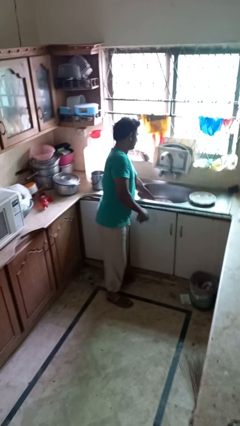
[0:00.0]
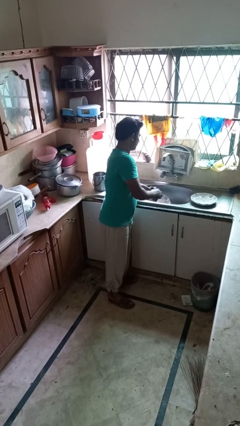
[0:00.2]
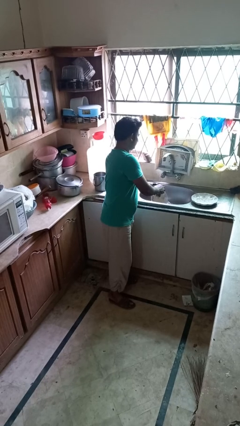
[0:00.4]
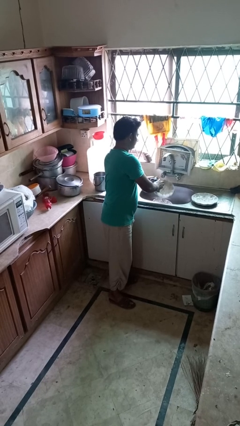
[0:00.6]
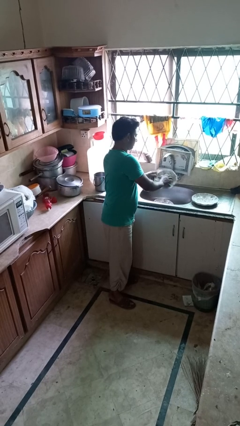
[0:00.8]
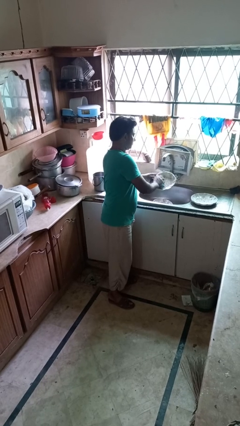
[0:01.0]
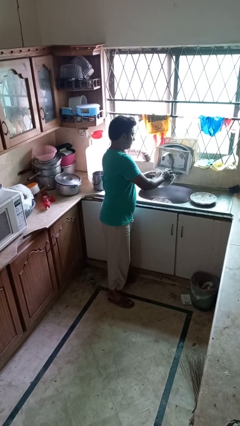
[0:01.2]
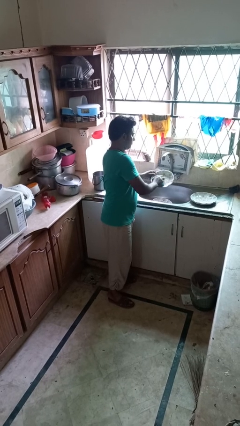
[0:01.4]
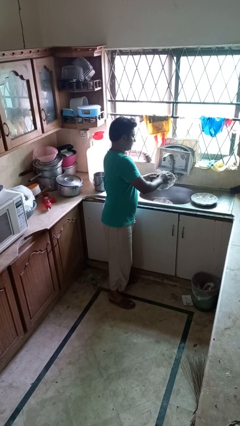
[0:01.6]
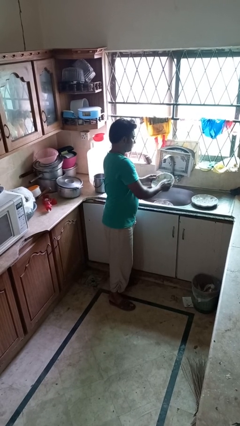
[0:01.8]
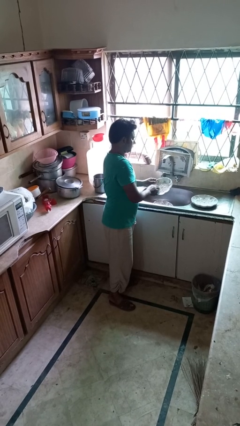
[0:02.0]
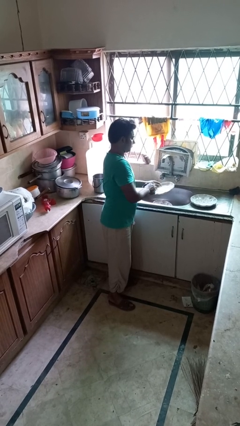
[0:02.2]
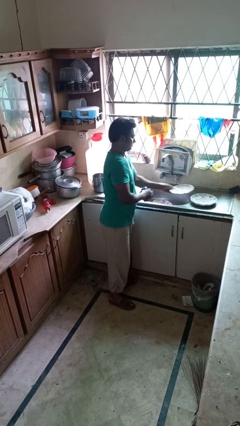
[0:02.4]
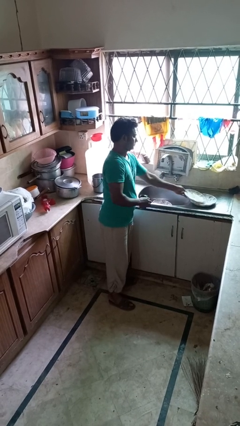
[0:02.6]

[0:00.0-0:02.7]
person dries dish

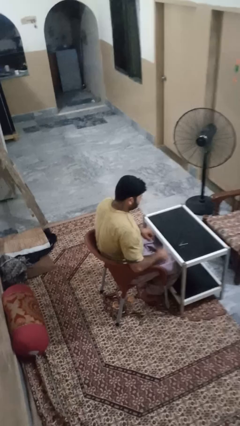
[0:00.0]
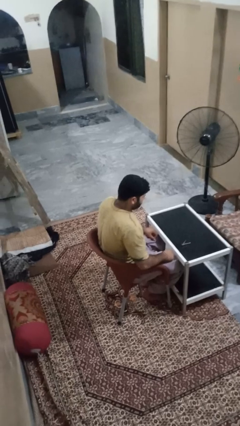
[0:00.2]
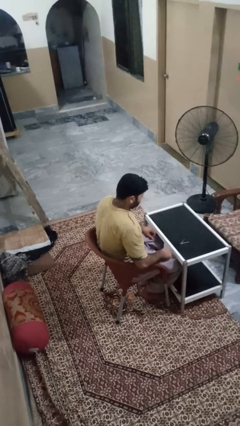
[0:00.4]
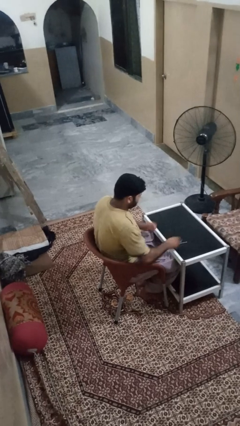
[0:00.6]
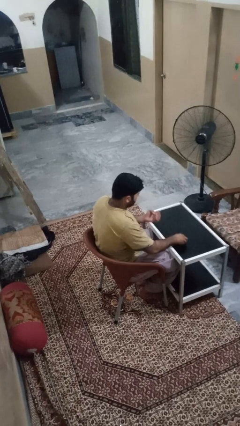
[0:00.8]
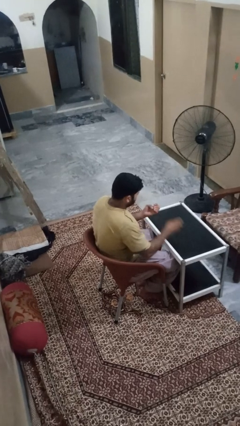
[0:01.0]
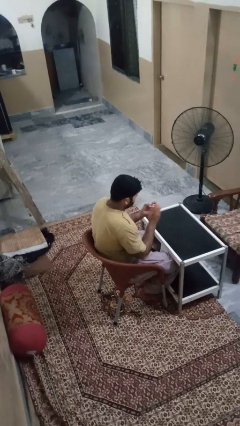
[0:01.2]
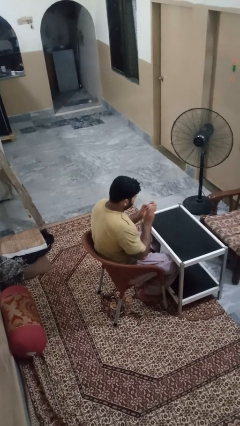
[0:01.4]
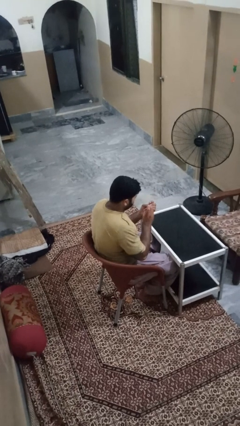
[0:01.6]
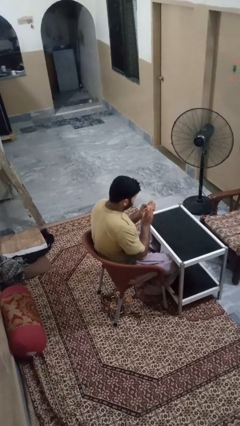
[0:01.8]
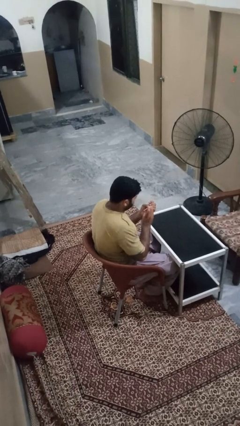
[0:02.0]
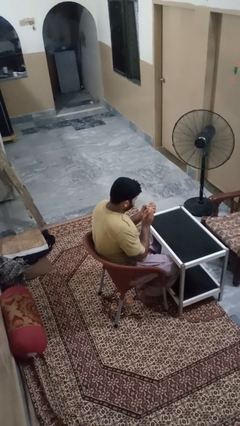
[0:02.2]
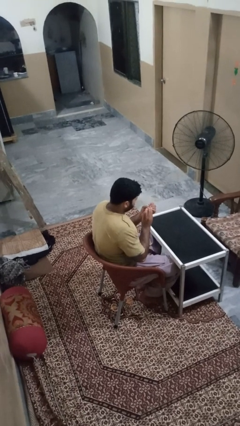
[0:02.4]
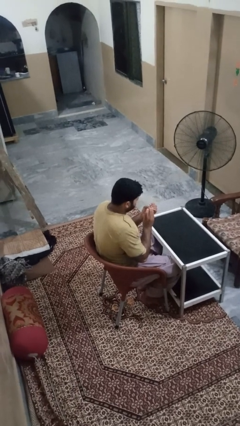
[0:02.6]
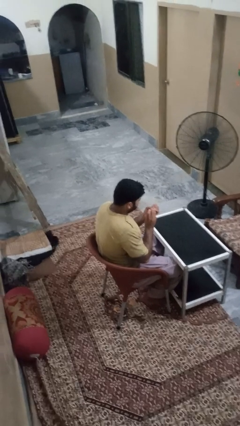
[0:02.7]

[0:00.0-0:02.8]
person clips fingernails

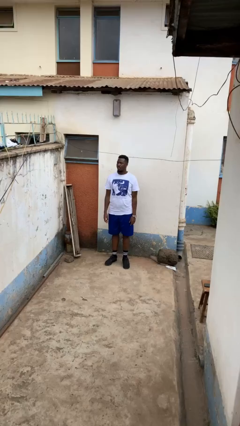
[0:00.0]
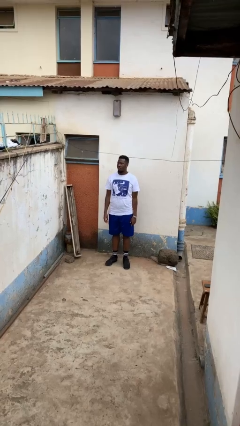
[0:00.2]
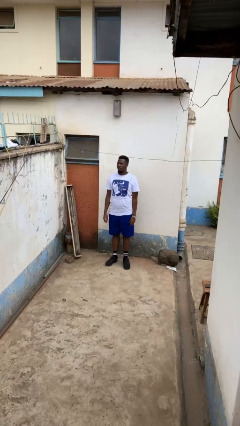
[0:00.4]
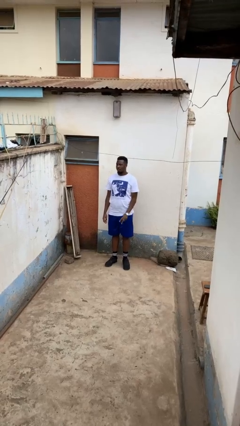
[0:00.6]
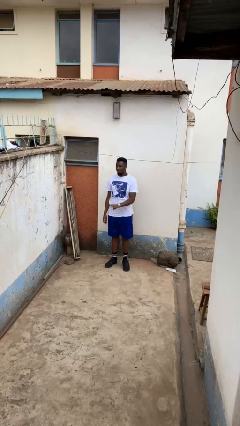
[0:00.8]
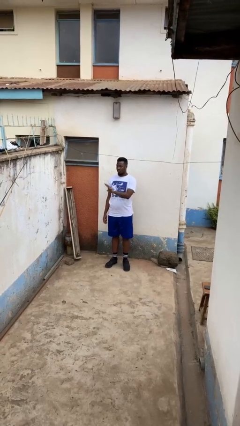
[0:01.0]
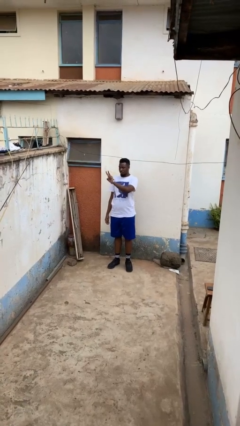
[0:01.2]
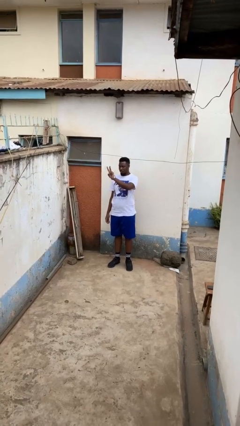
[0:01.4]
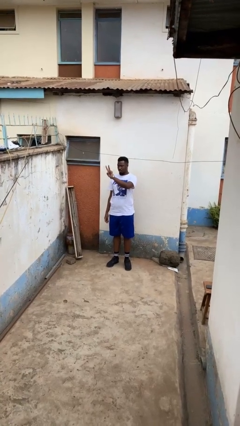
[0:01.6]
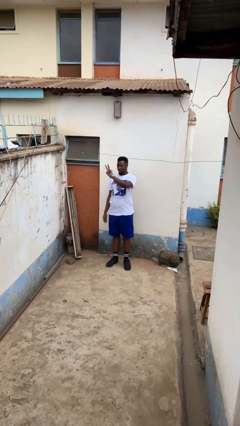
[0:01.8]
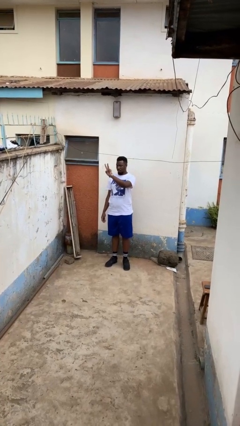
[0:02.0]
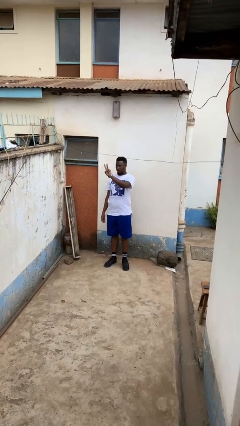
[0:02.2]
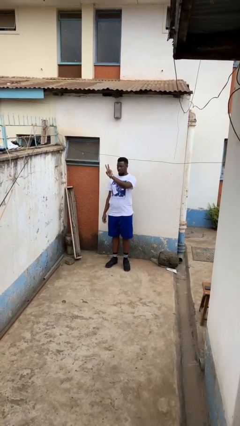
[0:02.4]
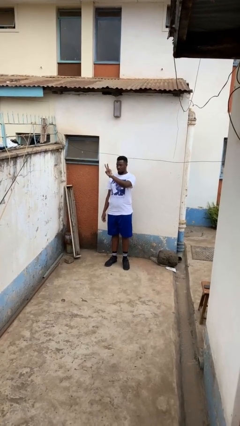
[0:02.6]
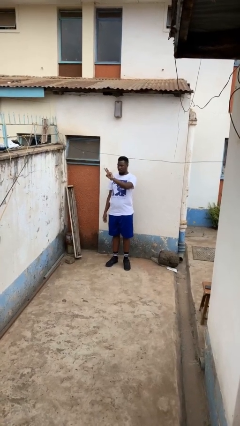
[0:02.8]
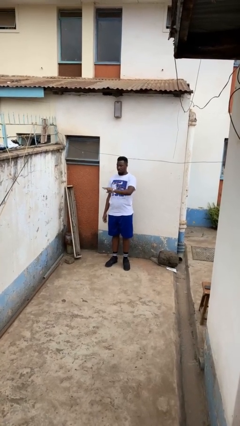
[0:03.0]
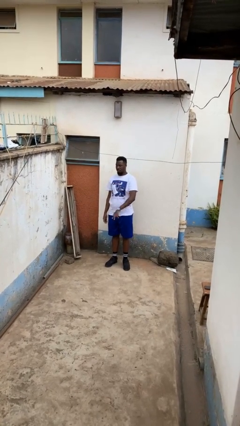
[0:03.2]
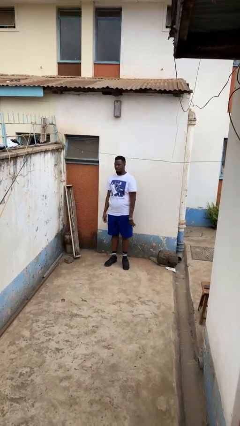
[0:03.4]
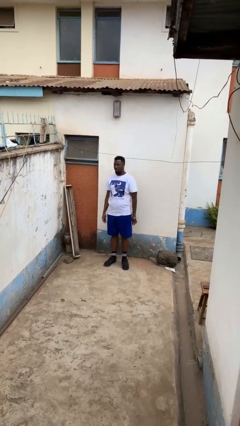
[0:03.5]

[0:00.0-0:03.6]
person gestures peace

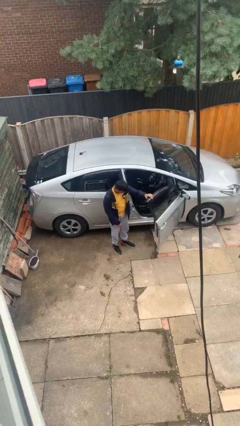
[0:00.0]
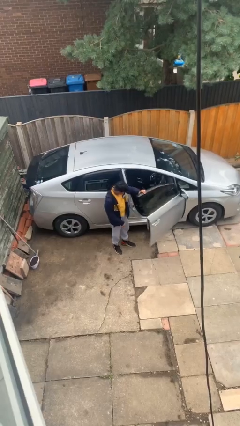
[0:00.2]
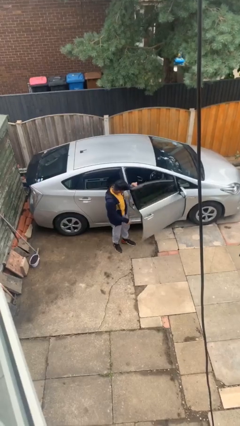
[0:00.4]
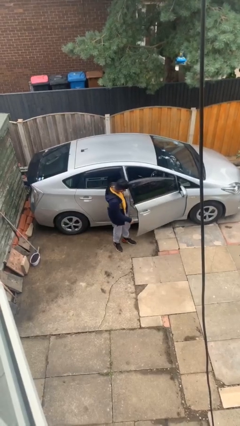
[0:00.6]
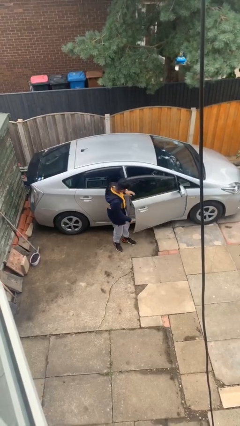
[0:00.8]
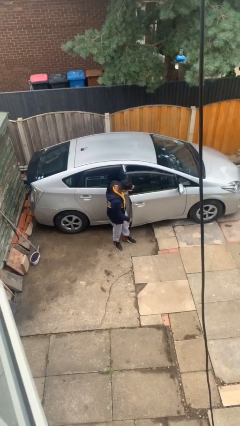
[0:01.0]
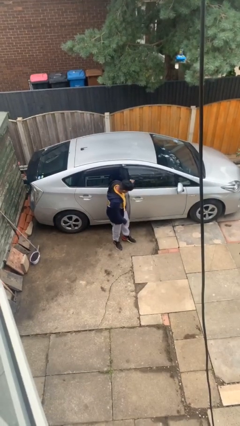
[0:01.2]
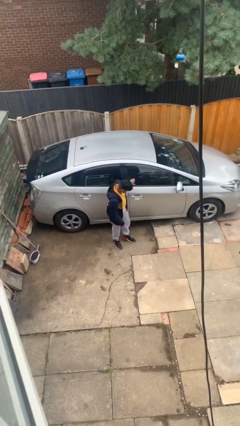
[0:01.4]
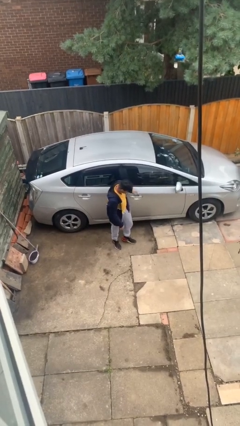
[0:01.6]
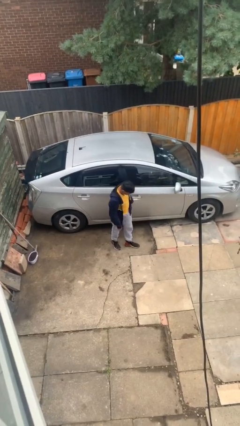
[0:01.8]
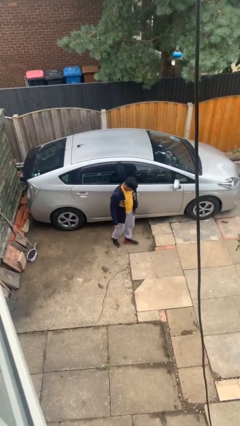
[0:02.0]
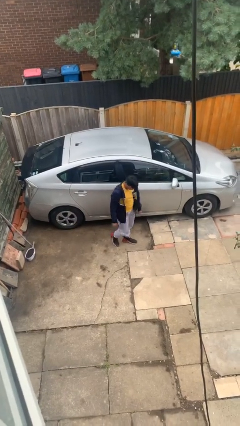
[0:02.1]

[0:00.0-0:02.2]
person closes car door

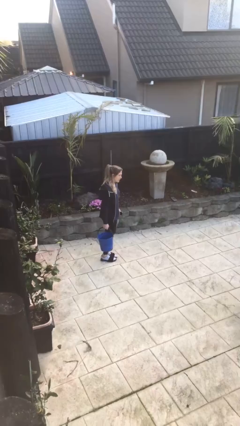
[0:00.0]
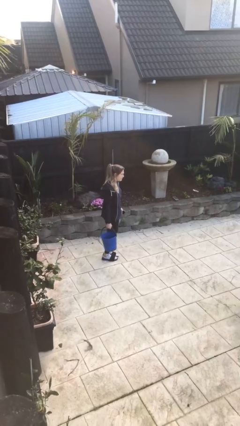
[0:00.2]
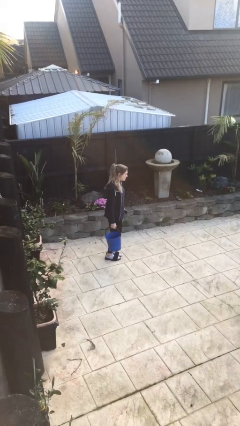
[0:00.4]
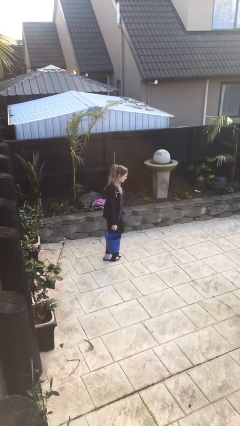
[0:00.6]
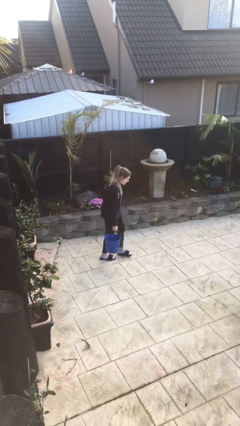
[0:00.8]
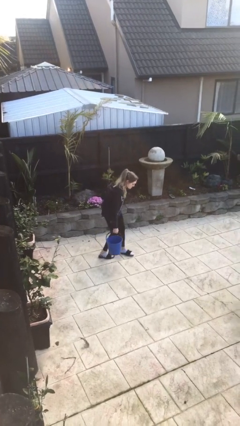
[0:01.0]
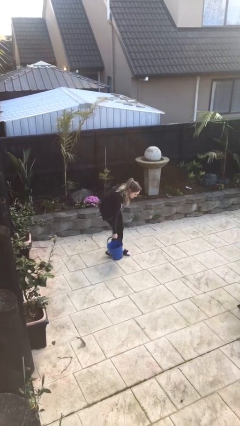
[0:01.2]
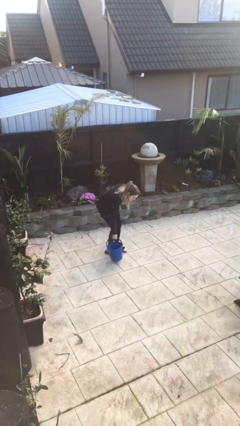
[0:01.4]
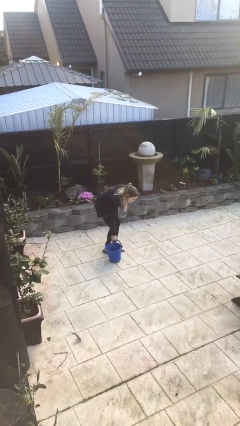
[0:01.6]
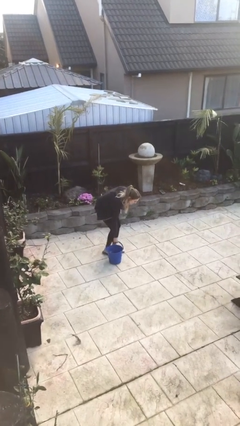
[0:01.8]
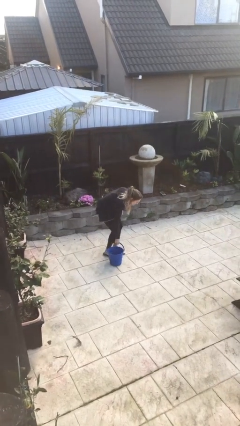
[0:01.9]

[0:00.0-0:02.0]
person puts down object on floor

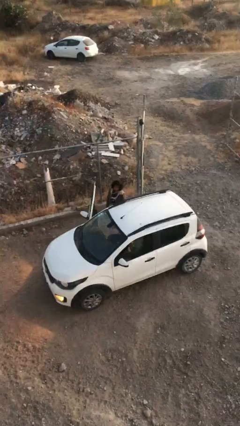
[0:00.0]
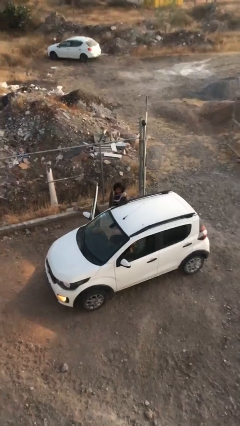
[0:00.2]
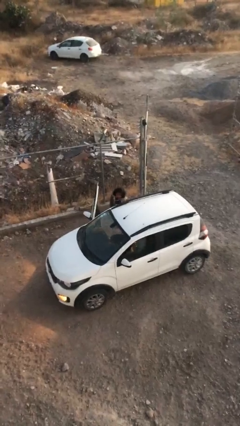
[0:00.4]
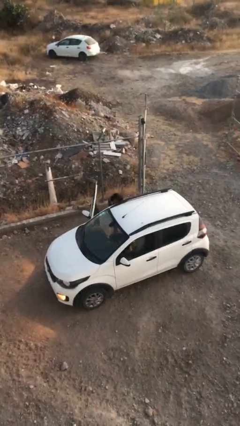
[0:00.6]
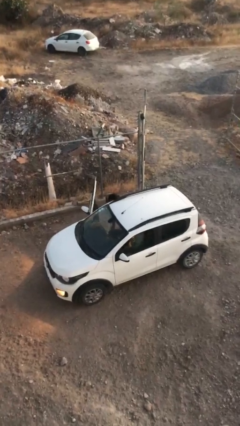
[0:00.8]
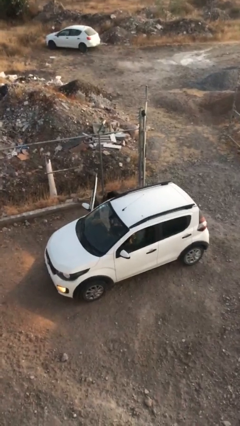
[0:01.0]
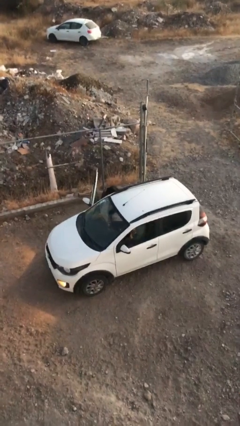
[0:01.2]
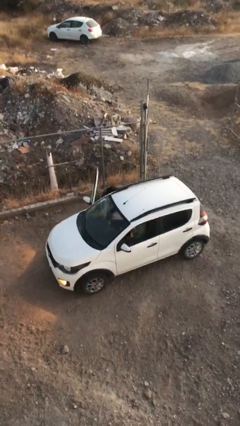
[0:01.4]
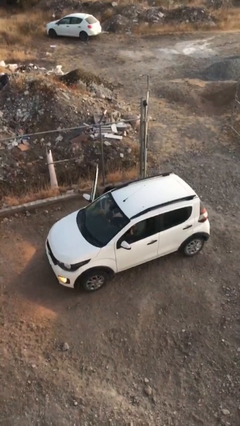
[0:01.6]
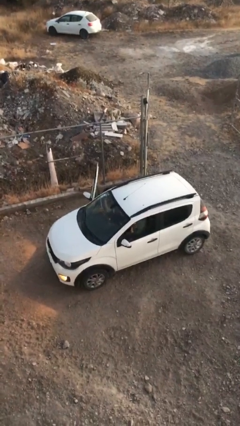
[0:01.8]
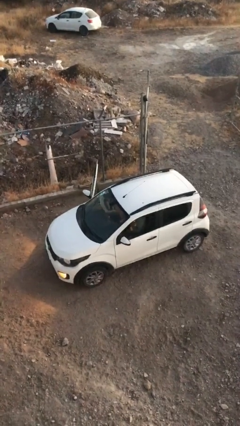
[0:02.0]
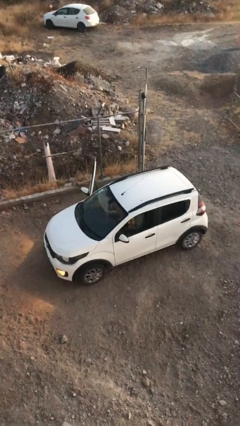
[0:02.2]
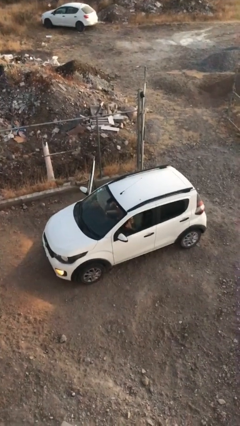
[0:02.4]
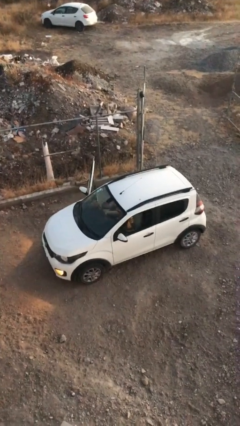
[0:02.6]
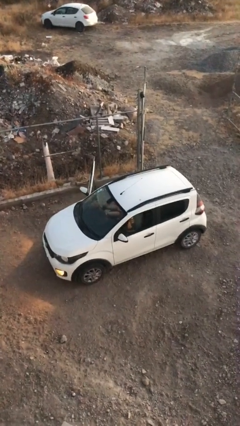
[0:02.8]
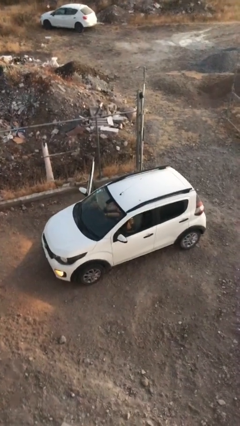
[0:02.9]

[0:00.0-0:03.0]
person enters car

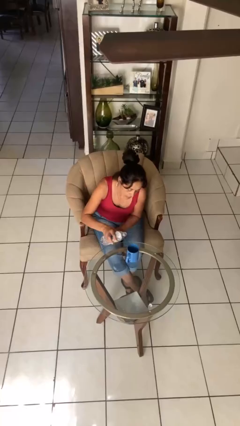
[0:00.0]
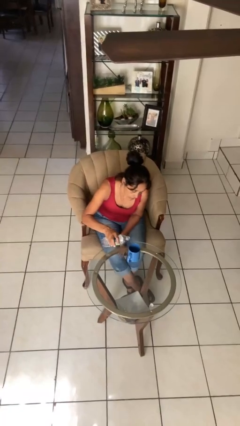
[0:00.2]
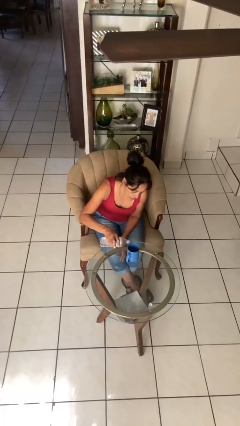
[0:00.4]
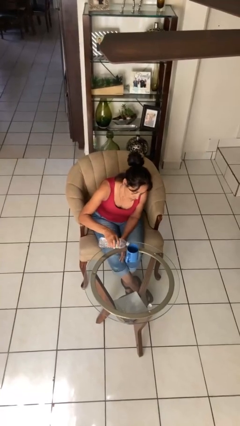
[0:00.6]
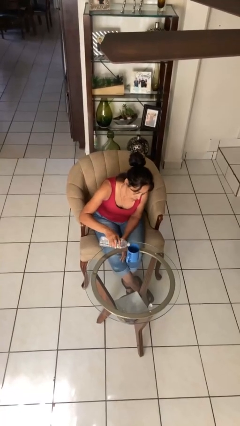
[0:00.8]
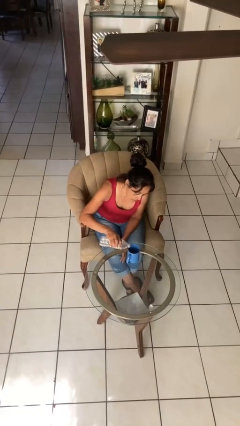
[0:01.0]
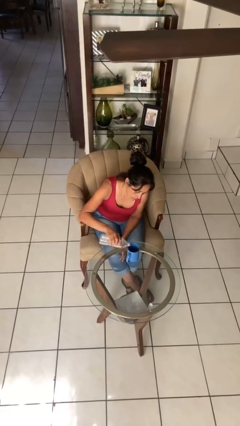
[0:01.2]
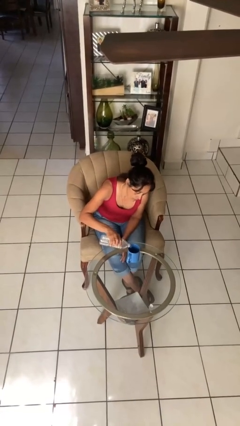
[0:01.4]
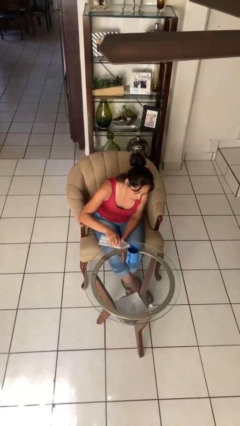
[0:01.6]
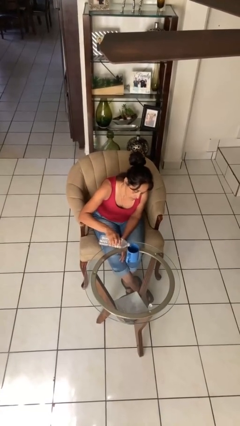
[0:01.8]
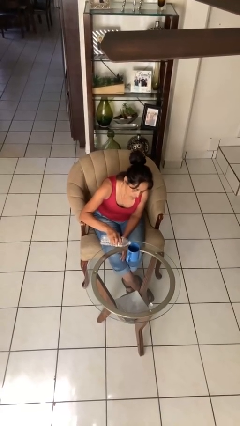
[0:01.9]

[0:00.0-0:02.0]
person pours liquid into cup
